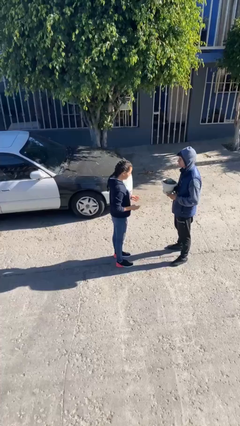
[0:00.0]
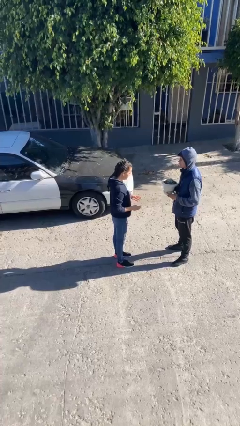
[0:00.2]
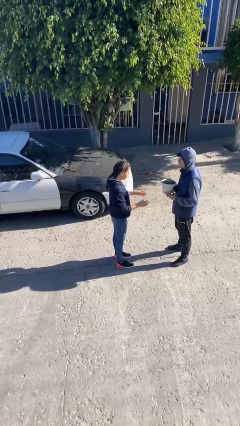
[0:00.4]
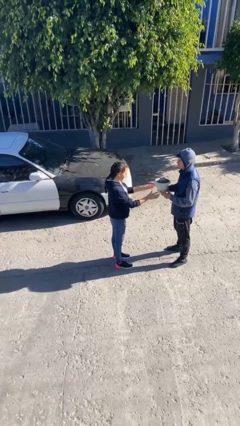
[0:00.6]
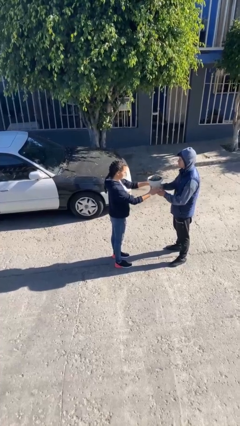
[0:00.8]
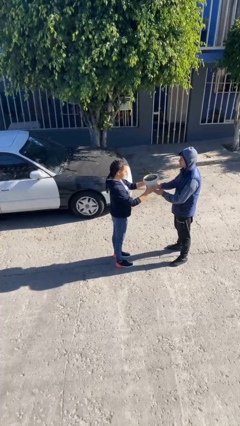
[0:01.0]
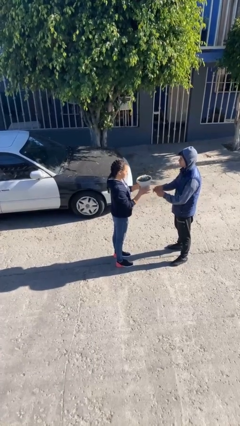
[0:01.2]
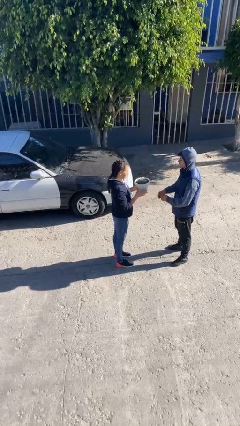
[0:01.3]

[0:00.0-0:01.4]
person transfers object to person

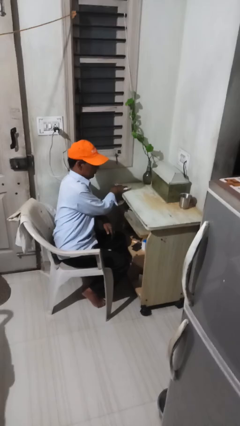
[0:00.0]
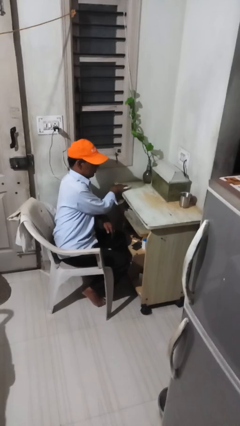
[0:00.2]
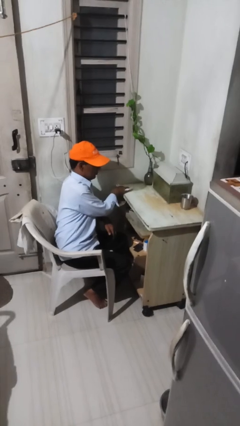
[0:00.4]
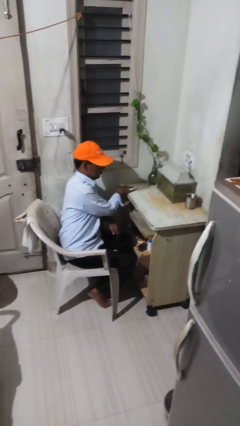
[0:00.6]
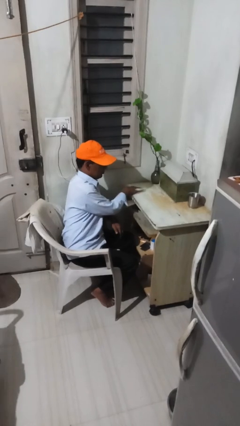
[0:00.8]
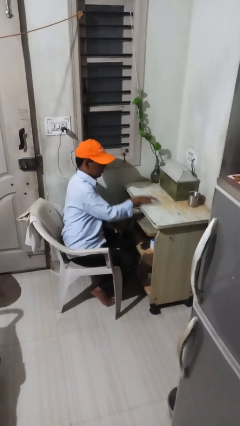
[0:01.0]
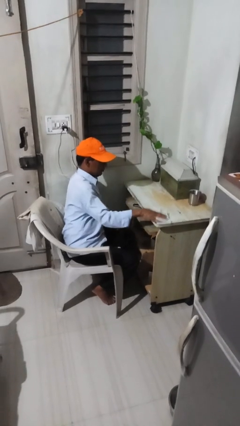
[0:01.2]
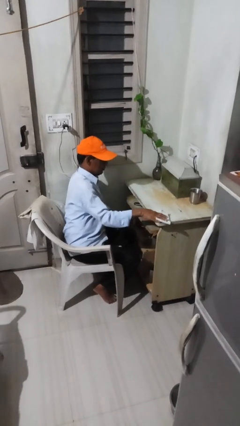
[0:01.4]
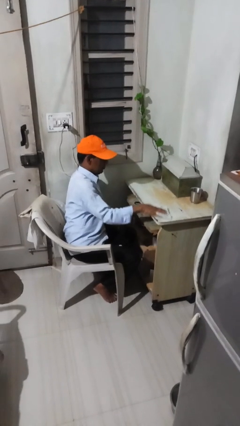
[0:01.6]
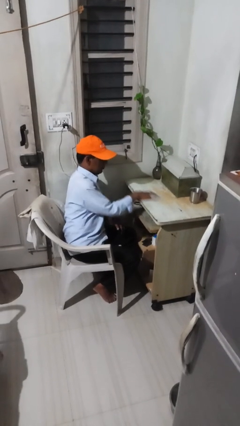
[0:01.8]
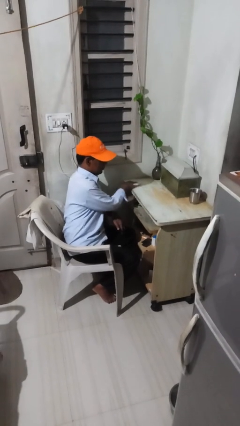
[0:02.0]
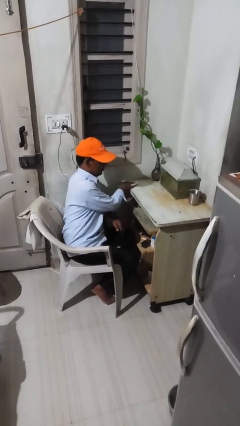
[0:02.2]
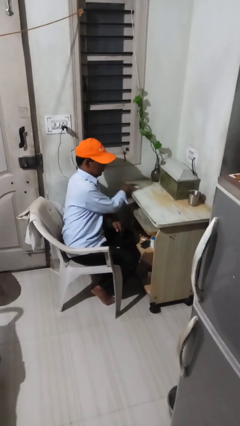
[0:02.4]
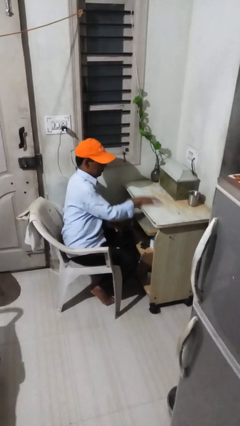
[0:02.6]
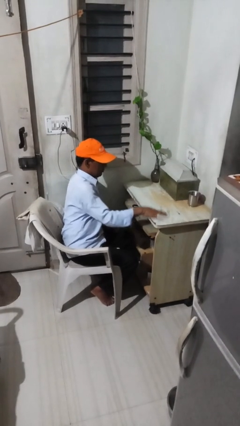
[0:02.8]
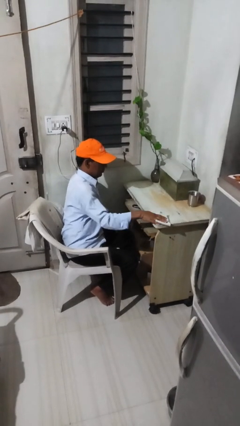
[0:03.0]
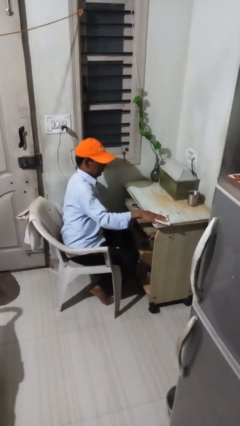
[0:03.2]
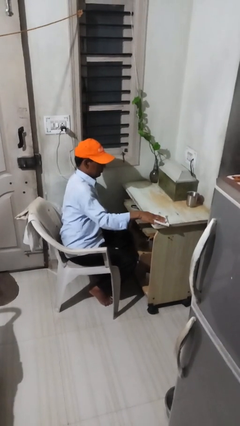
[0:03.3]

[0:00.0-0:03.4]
person cleans table with rag

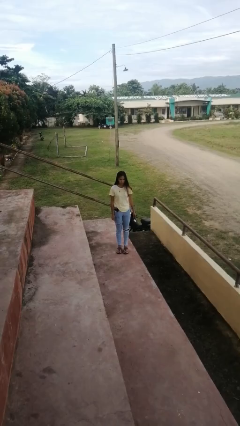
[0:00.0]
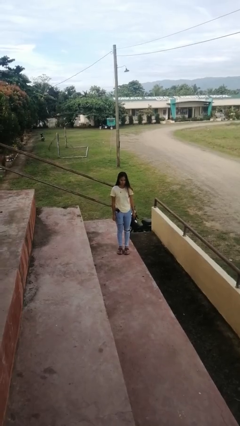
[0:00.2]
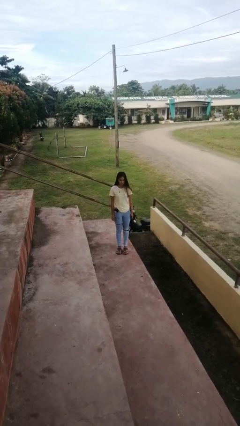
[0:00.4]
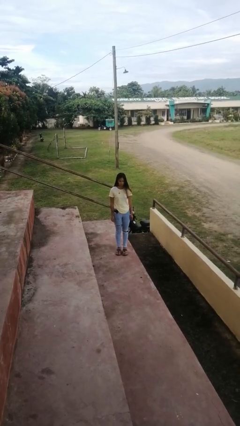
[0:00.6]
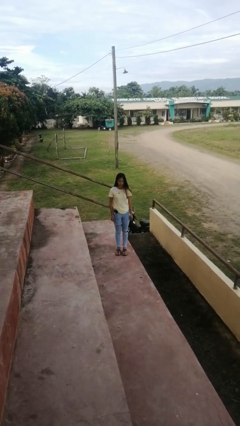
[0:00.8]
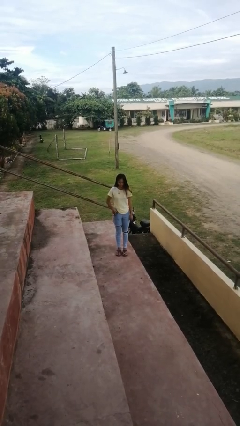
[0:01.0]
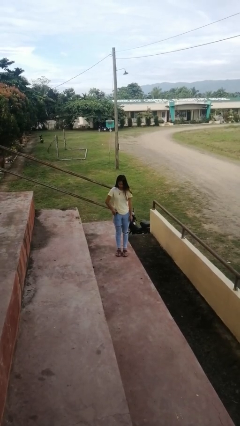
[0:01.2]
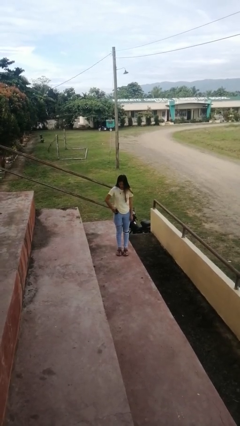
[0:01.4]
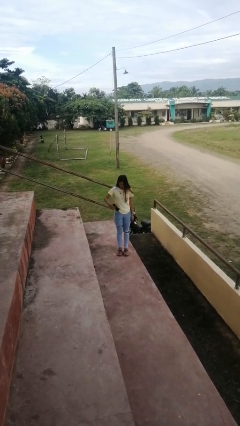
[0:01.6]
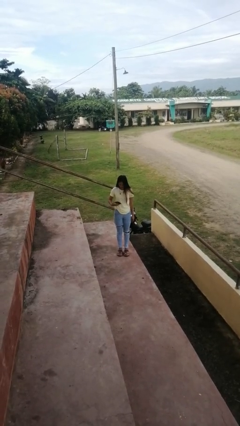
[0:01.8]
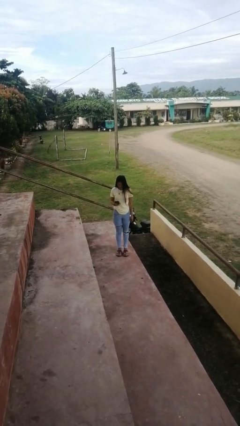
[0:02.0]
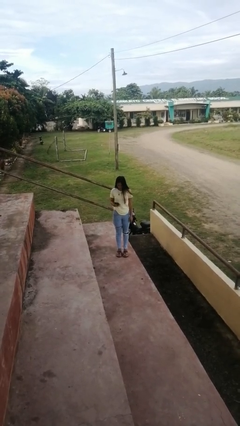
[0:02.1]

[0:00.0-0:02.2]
person takes phone from pocket

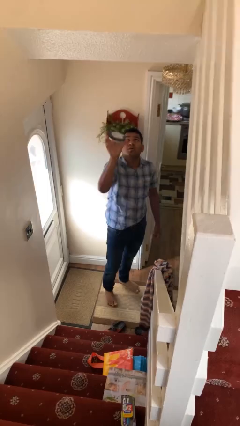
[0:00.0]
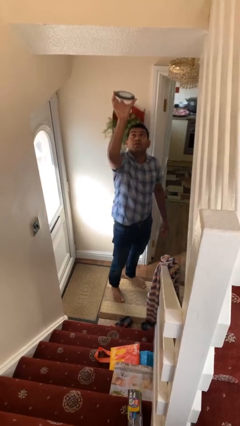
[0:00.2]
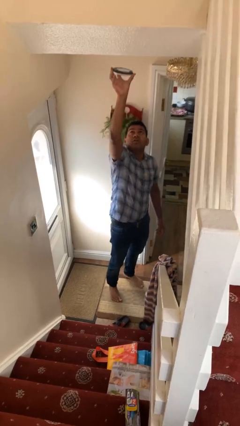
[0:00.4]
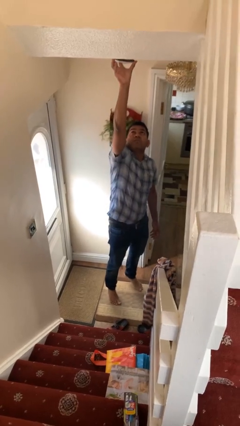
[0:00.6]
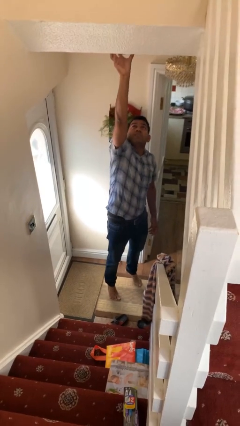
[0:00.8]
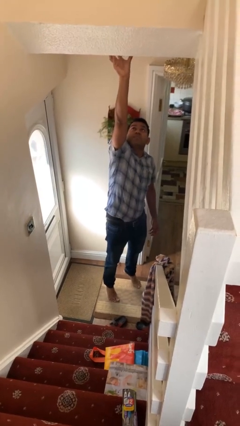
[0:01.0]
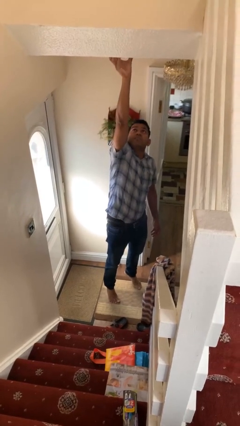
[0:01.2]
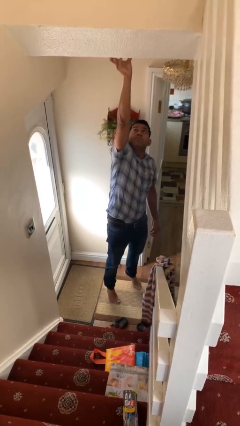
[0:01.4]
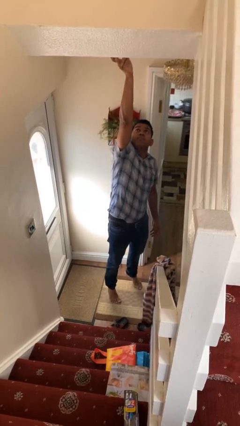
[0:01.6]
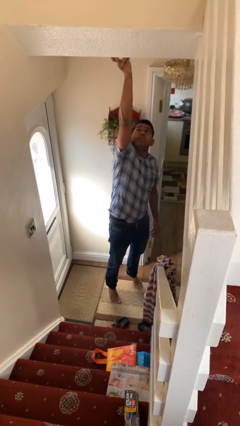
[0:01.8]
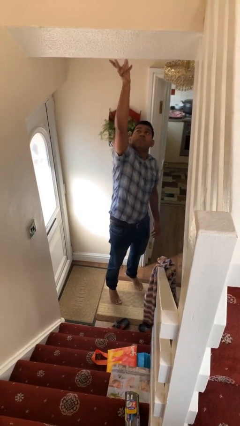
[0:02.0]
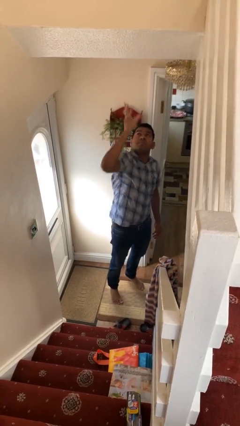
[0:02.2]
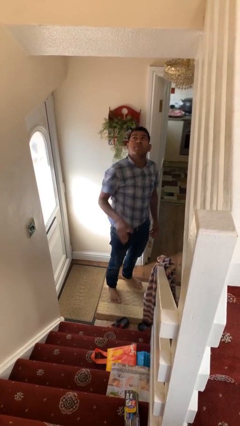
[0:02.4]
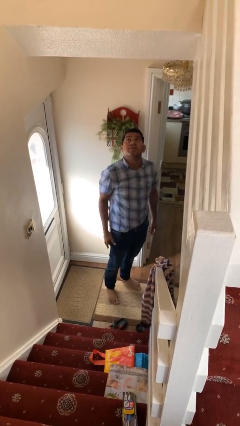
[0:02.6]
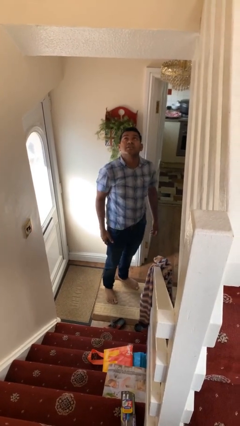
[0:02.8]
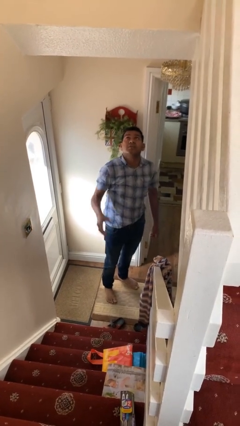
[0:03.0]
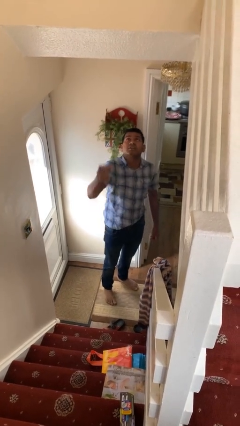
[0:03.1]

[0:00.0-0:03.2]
person puts up smoke detector

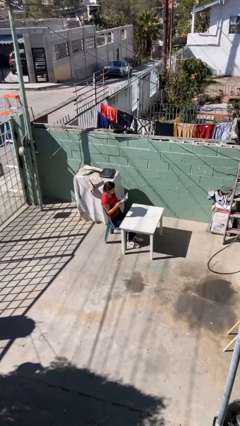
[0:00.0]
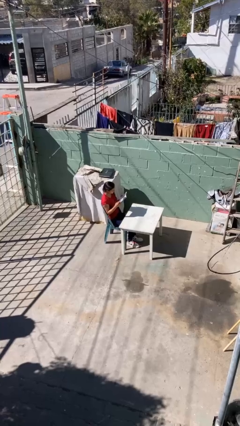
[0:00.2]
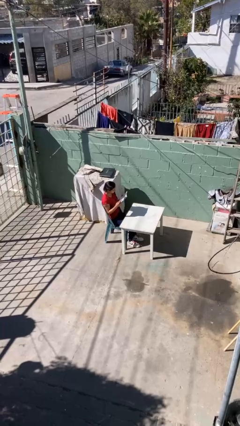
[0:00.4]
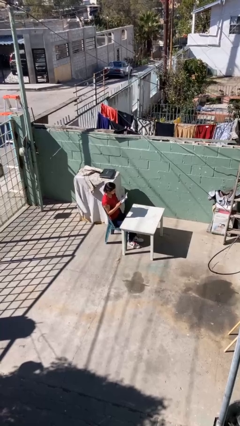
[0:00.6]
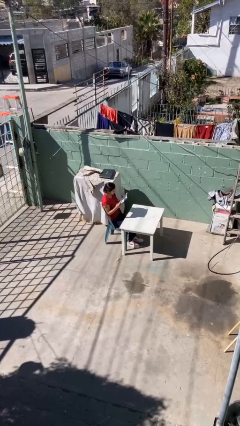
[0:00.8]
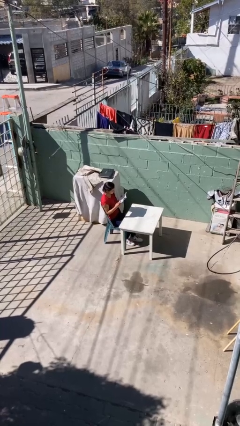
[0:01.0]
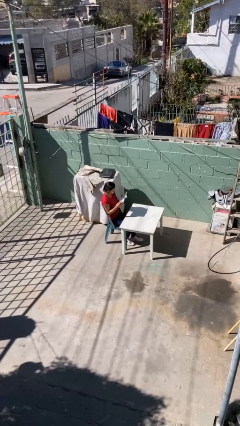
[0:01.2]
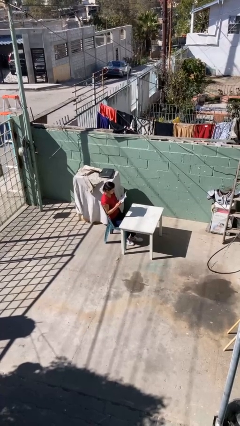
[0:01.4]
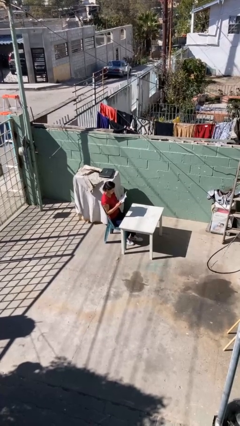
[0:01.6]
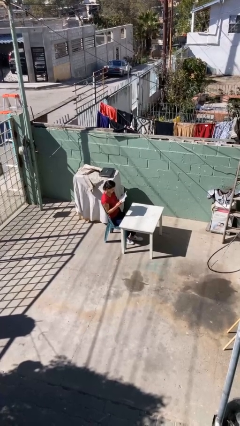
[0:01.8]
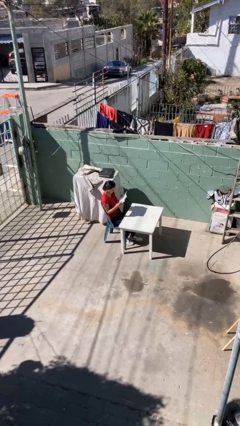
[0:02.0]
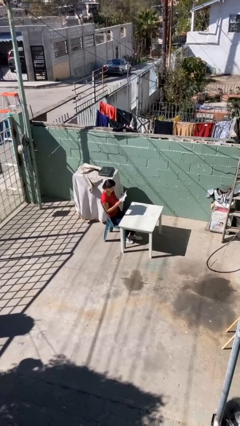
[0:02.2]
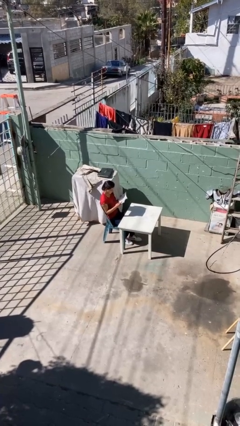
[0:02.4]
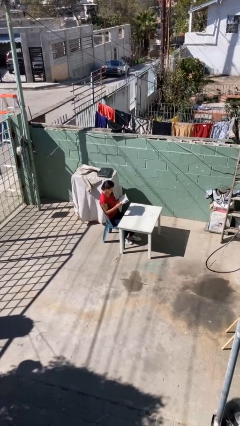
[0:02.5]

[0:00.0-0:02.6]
person reads document

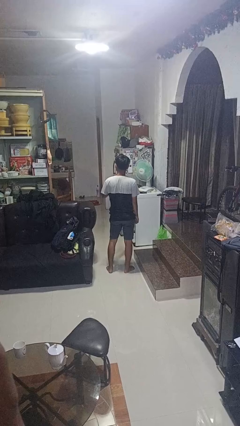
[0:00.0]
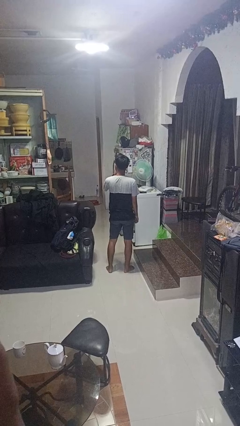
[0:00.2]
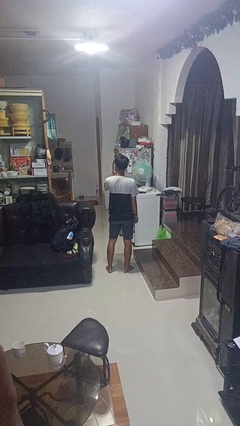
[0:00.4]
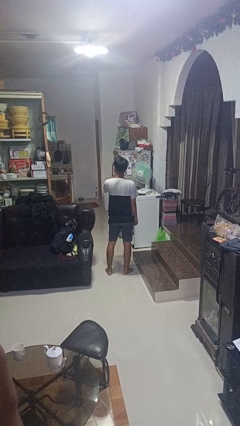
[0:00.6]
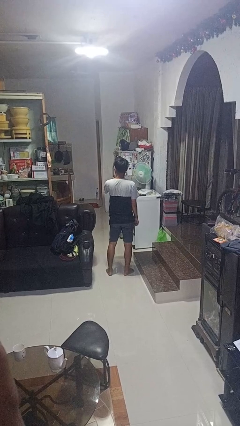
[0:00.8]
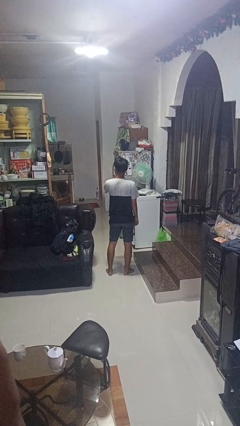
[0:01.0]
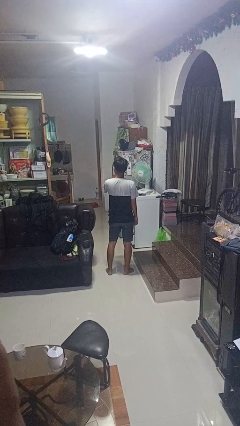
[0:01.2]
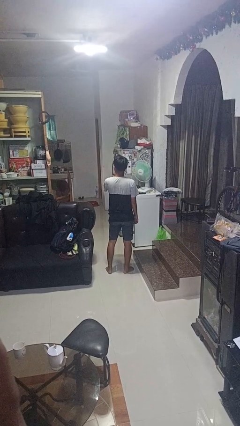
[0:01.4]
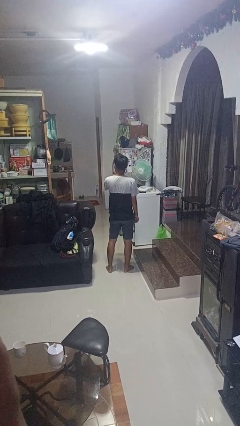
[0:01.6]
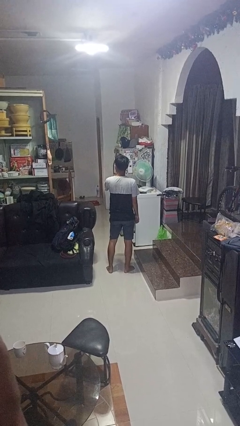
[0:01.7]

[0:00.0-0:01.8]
person gestures be quiet

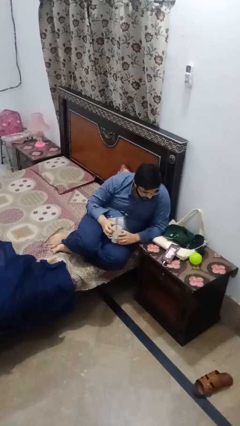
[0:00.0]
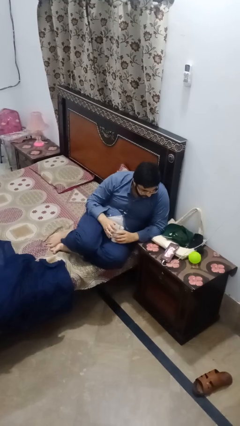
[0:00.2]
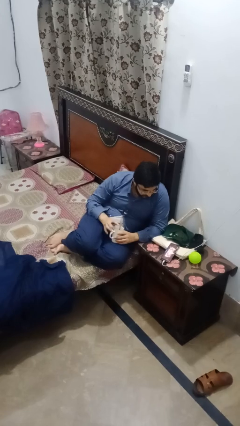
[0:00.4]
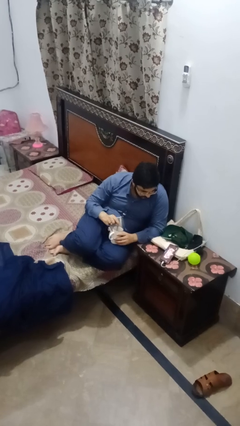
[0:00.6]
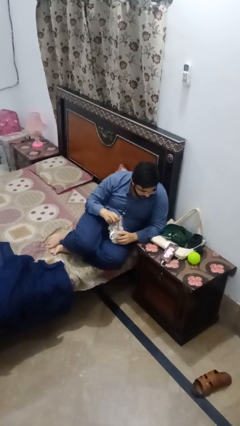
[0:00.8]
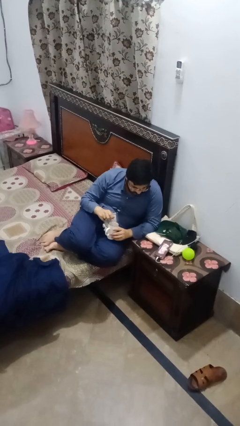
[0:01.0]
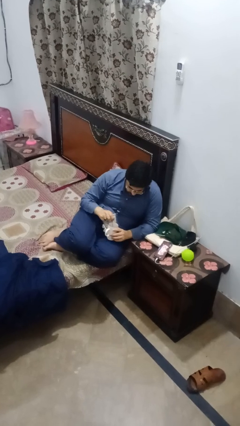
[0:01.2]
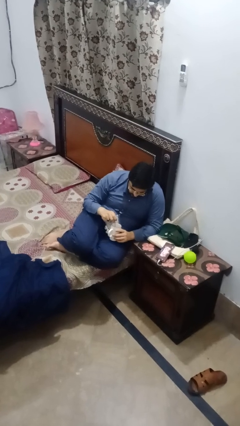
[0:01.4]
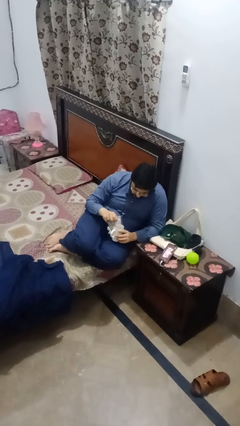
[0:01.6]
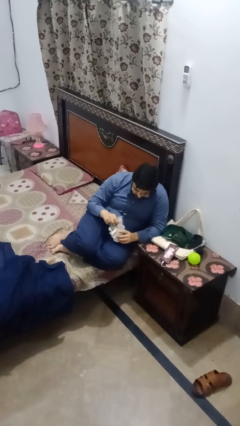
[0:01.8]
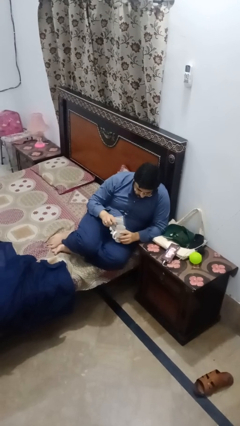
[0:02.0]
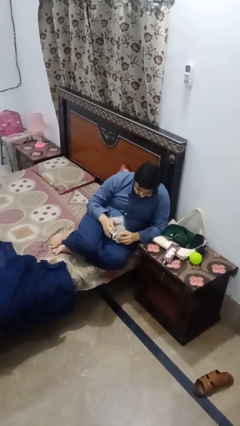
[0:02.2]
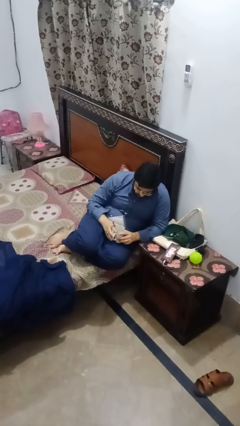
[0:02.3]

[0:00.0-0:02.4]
person stirs mug
